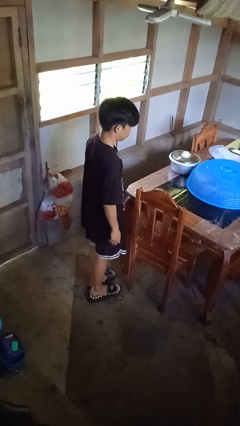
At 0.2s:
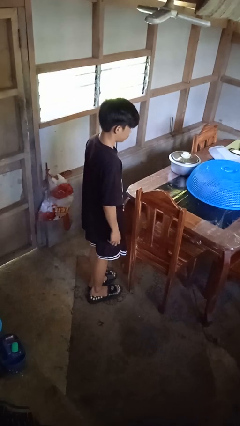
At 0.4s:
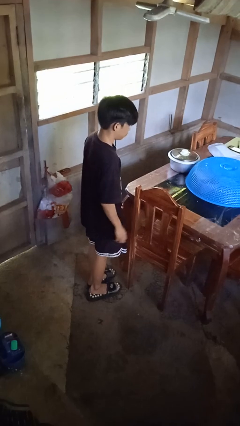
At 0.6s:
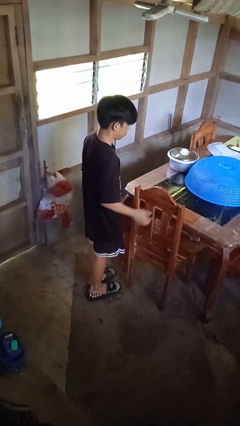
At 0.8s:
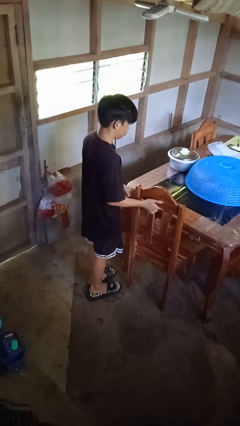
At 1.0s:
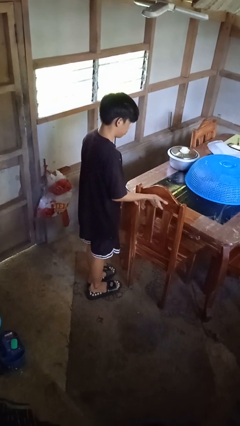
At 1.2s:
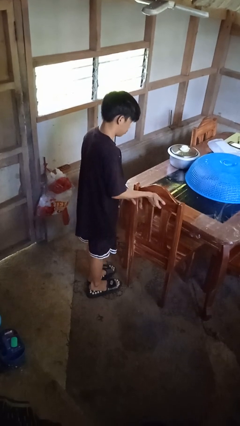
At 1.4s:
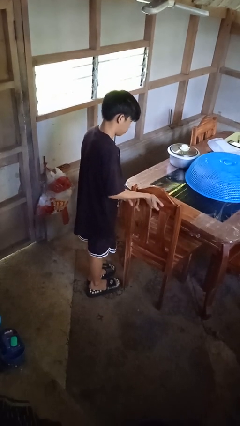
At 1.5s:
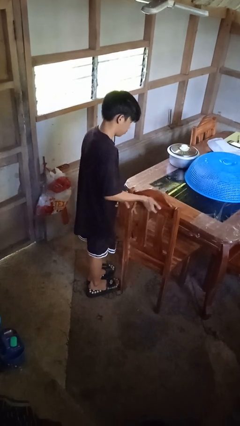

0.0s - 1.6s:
person pulls out chair

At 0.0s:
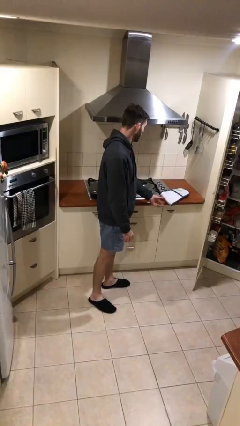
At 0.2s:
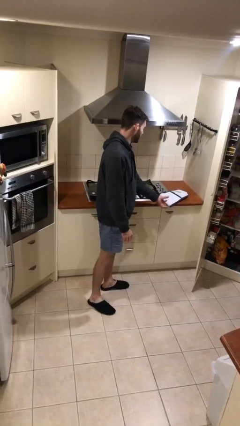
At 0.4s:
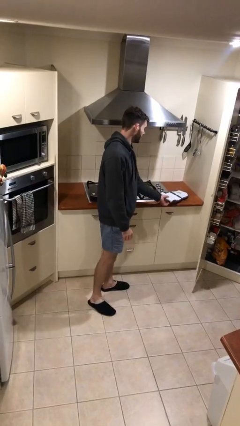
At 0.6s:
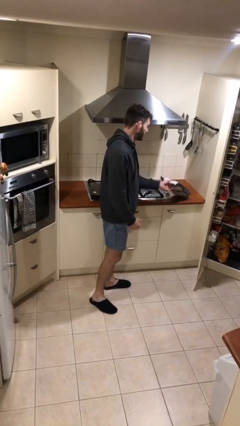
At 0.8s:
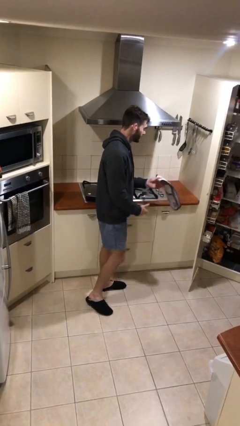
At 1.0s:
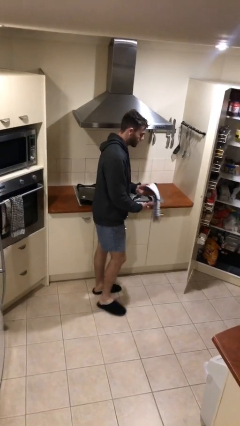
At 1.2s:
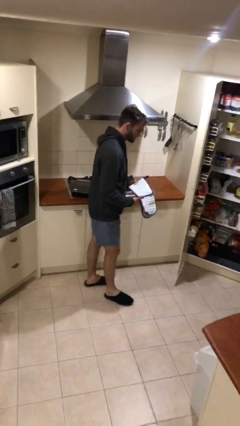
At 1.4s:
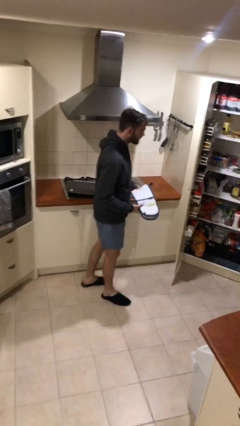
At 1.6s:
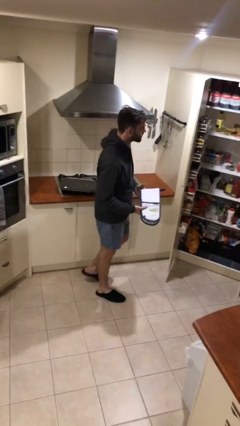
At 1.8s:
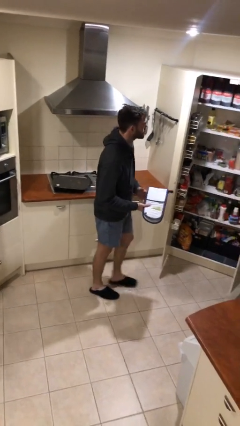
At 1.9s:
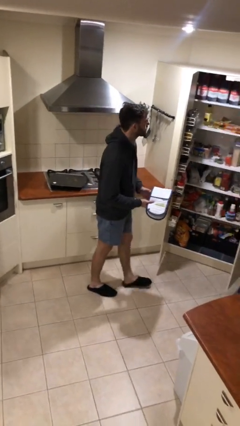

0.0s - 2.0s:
person picks up object from table

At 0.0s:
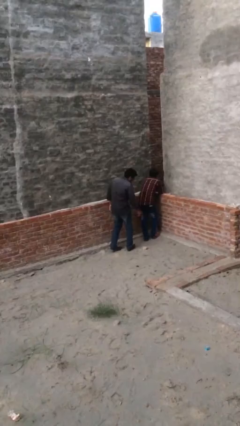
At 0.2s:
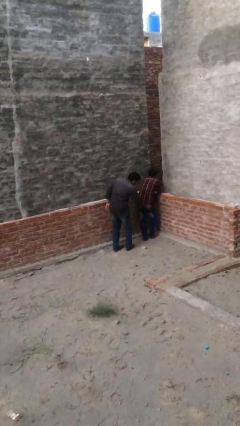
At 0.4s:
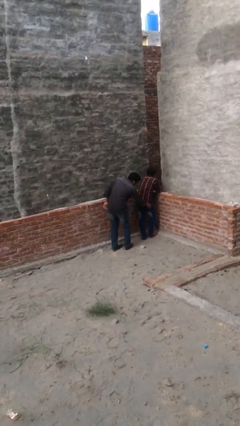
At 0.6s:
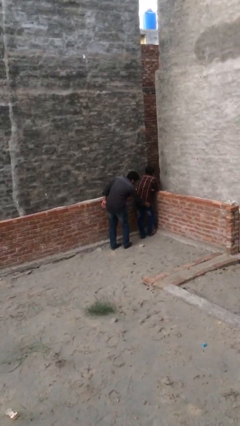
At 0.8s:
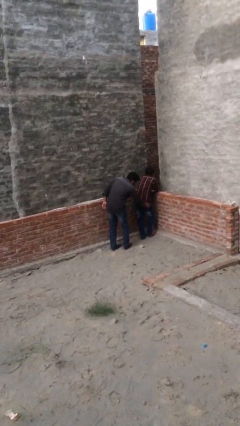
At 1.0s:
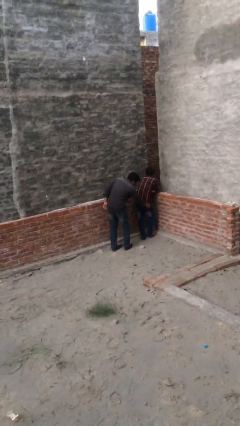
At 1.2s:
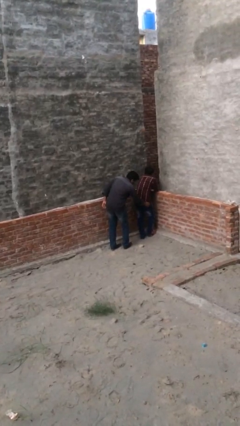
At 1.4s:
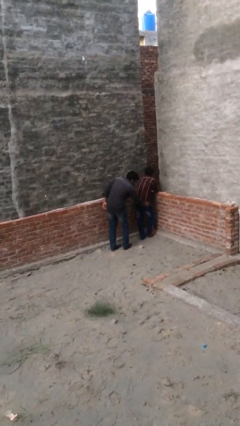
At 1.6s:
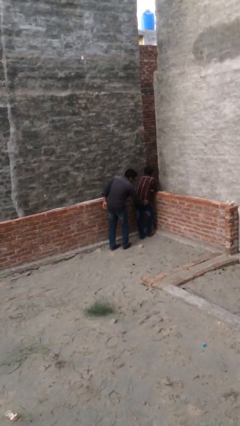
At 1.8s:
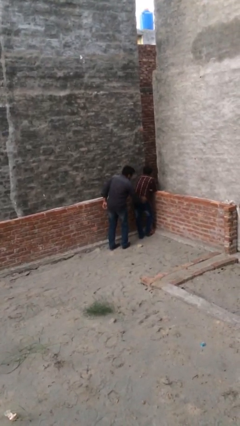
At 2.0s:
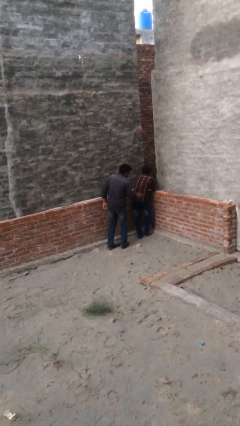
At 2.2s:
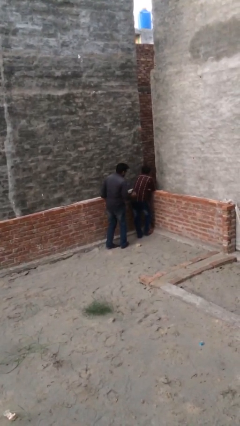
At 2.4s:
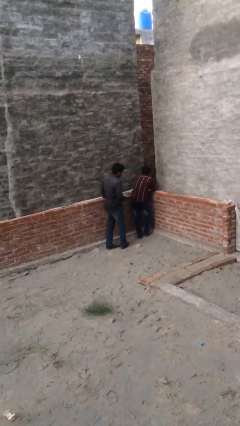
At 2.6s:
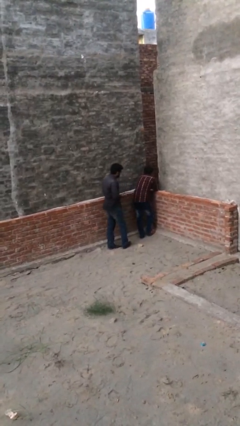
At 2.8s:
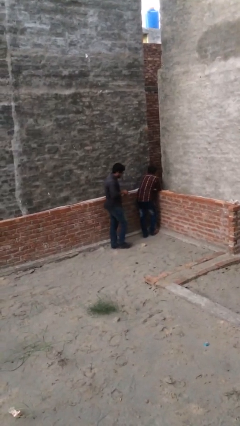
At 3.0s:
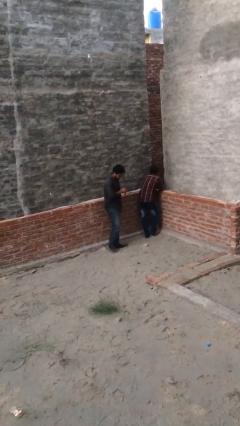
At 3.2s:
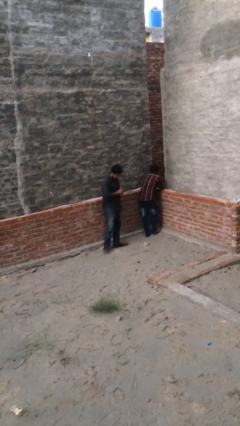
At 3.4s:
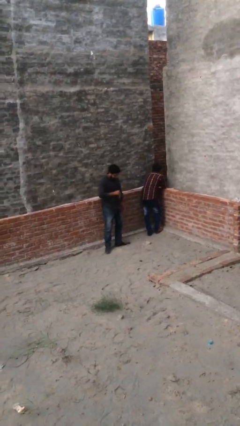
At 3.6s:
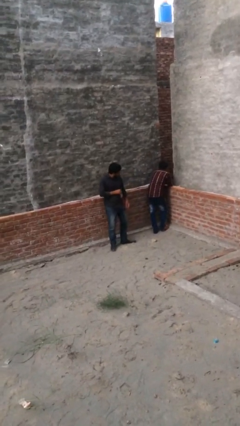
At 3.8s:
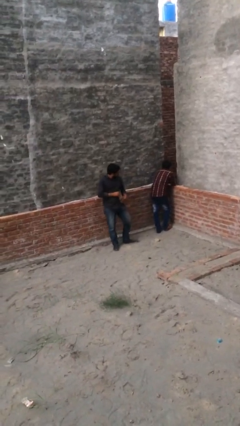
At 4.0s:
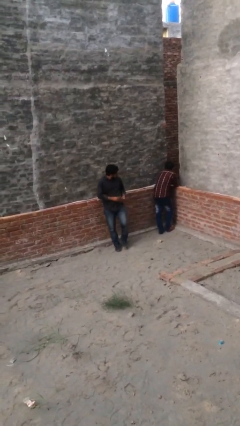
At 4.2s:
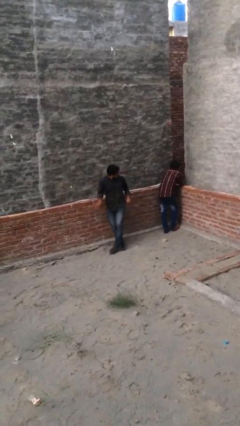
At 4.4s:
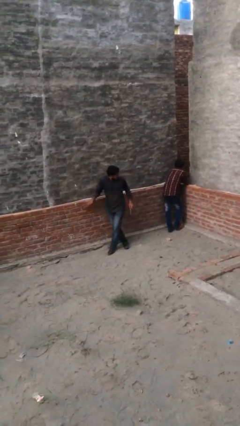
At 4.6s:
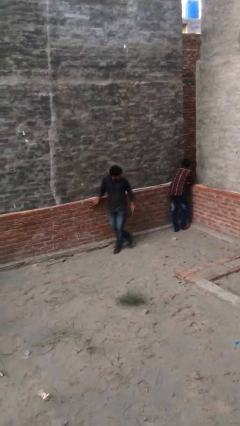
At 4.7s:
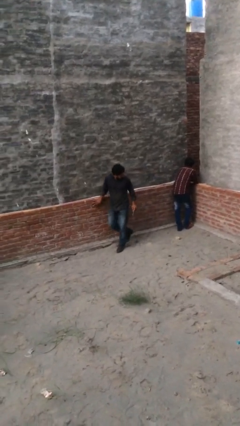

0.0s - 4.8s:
person steals object from person

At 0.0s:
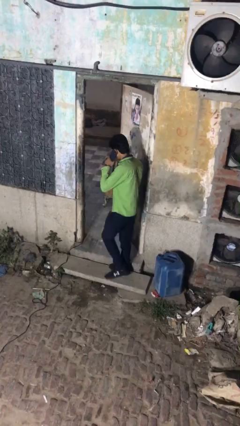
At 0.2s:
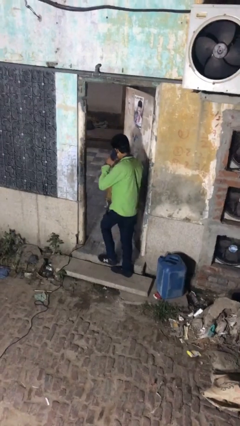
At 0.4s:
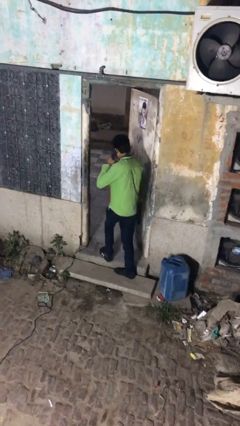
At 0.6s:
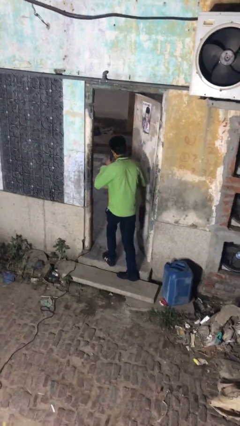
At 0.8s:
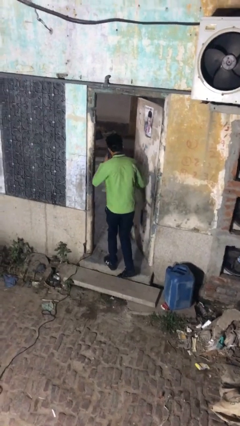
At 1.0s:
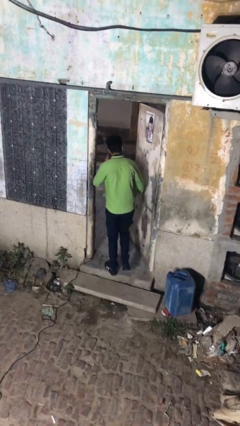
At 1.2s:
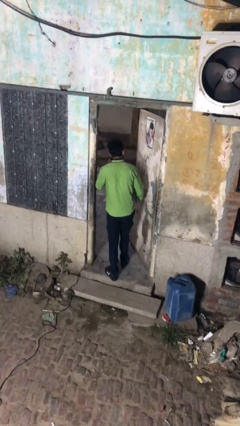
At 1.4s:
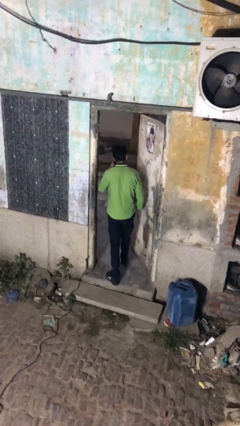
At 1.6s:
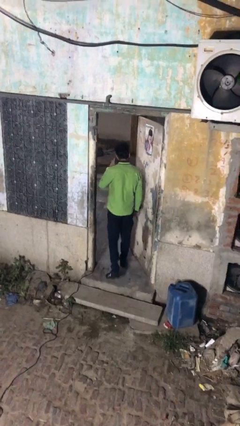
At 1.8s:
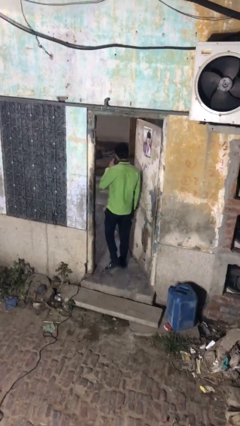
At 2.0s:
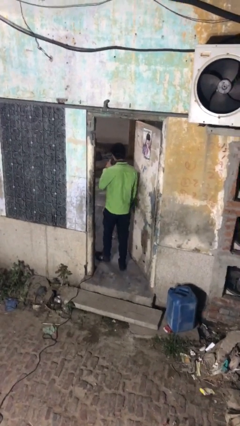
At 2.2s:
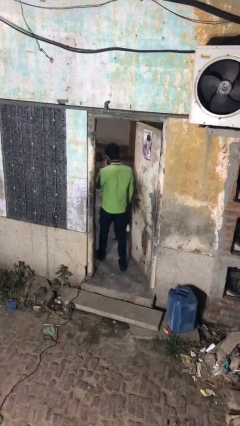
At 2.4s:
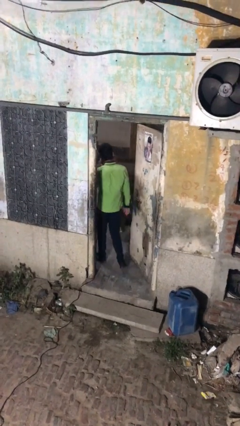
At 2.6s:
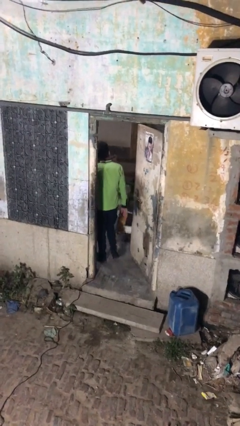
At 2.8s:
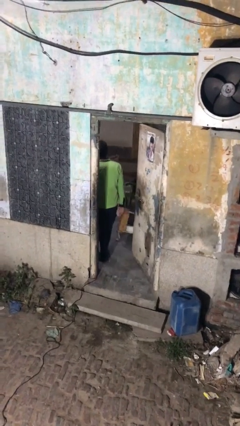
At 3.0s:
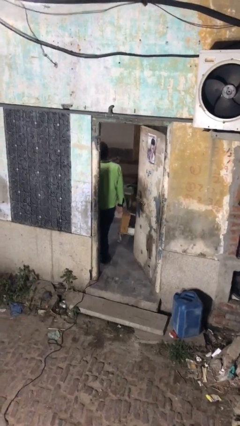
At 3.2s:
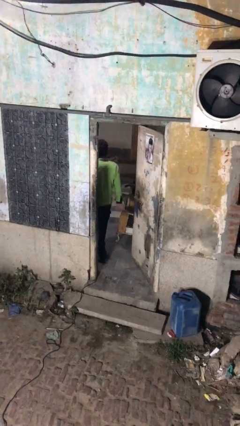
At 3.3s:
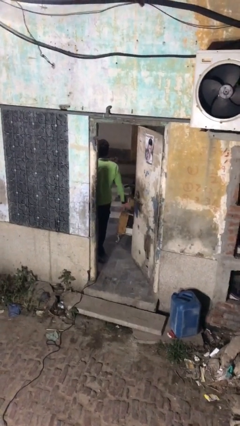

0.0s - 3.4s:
person exits scene through structure

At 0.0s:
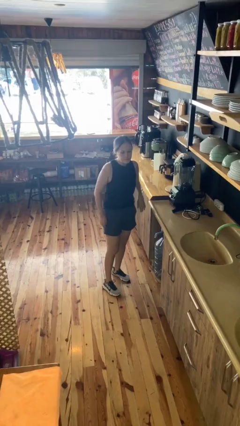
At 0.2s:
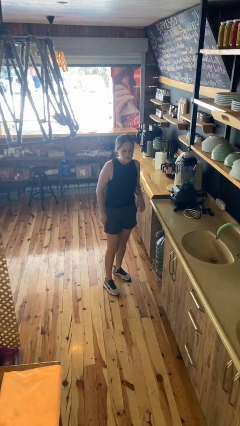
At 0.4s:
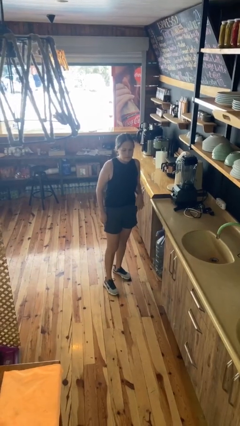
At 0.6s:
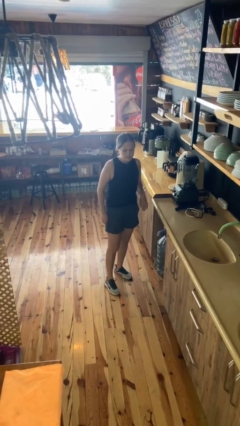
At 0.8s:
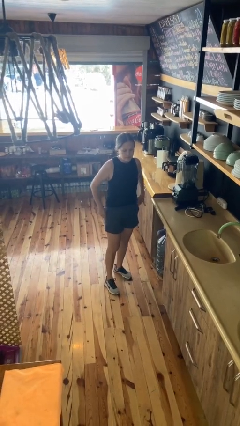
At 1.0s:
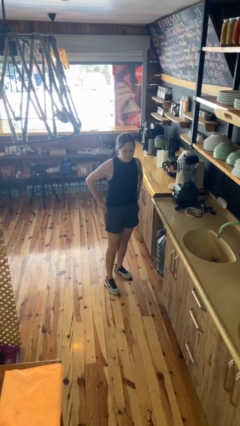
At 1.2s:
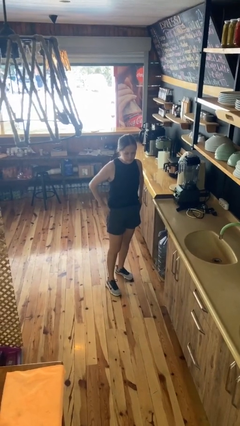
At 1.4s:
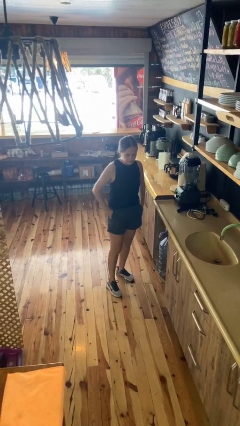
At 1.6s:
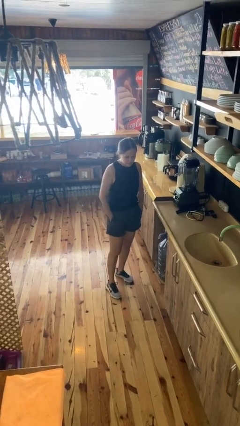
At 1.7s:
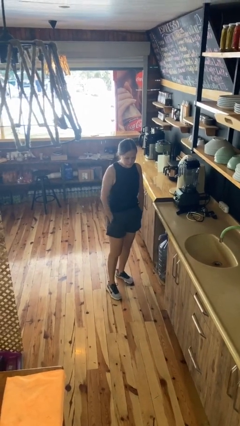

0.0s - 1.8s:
person puts hands in back pockets

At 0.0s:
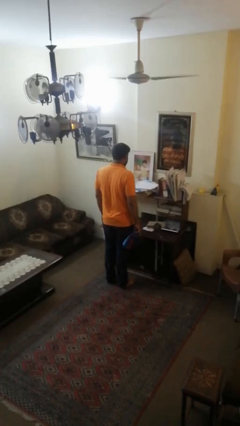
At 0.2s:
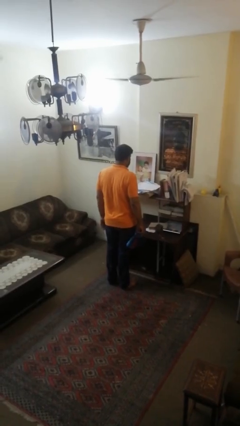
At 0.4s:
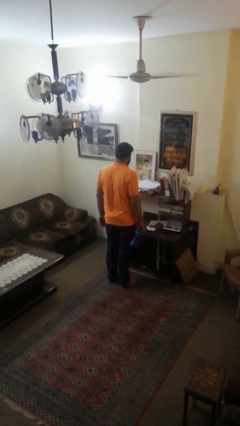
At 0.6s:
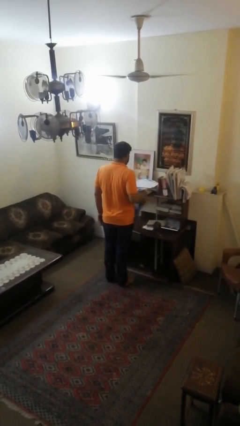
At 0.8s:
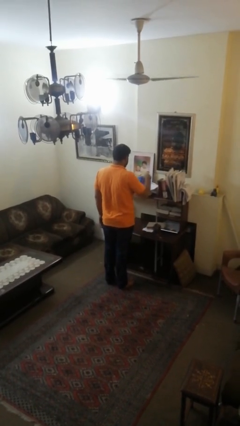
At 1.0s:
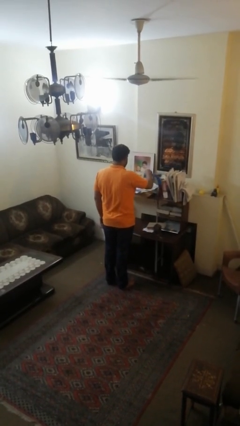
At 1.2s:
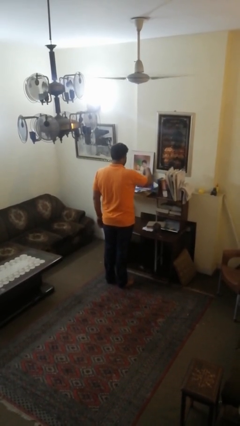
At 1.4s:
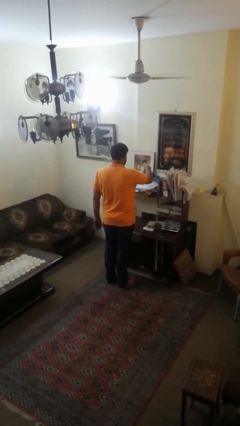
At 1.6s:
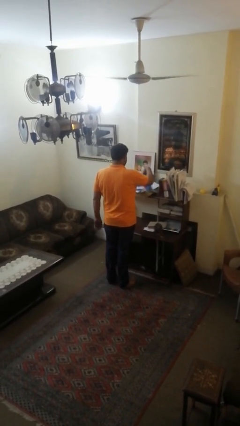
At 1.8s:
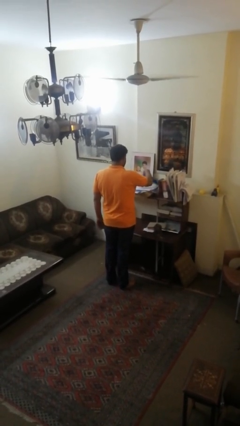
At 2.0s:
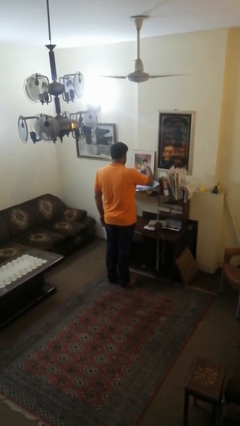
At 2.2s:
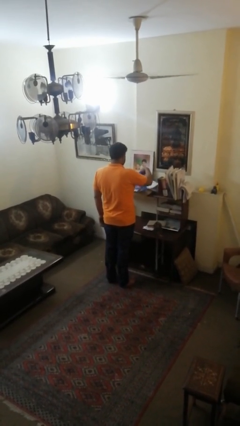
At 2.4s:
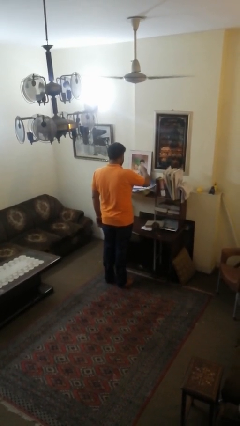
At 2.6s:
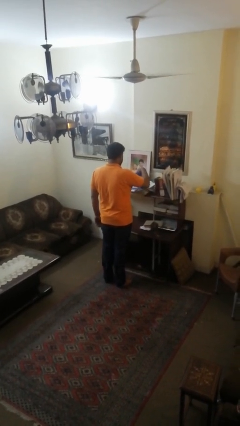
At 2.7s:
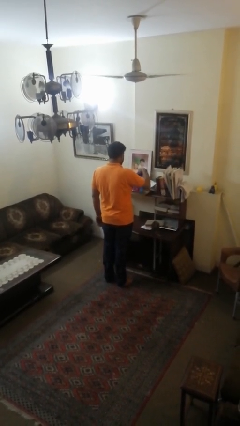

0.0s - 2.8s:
person dusts furniture

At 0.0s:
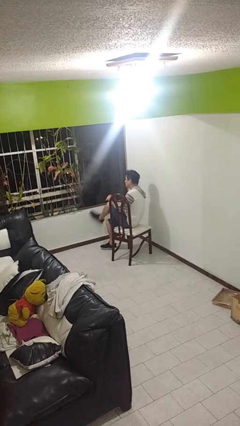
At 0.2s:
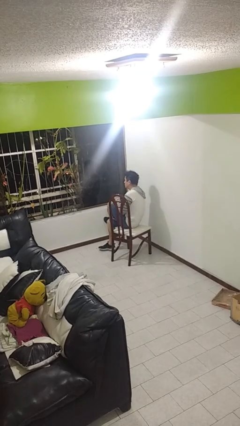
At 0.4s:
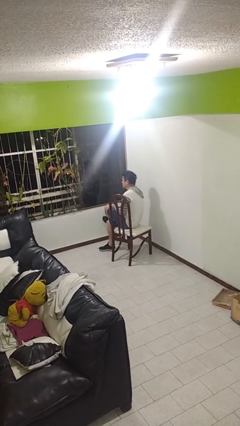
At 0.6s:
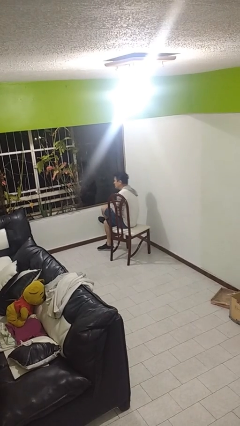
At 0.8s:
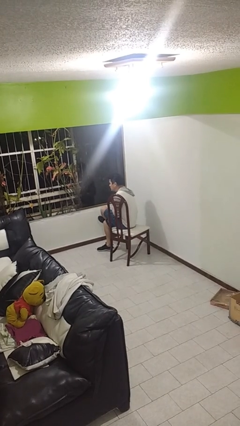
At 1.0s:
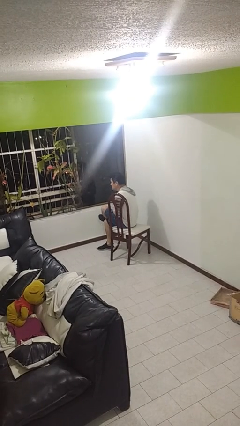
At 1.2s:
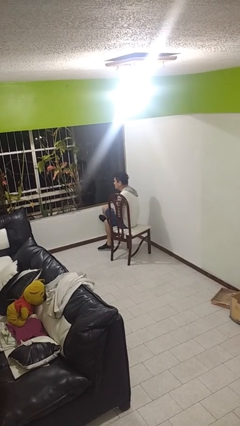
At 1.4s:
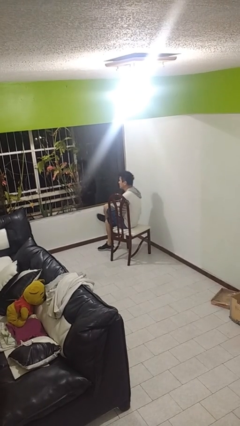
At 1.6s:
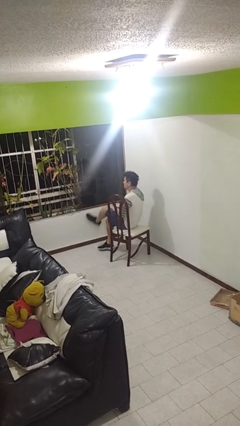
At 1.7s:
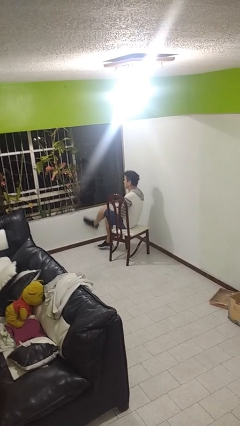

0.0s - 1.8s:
person crosses legs
